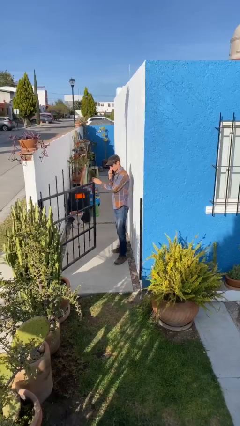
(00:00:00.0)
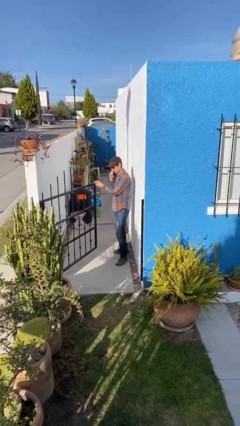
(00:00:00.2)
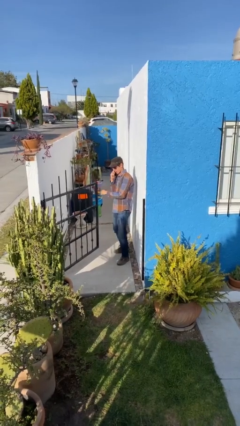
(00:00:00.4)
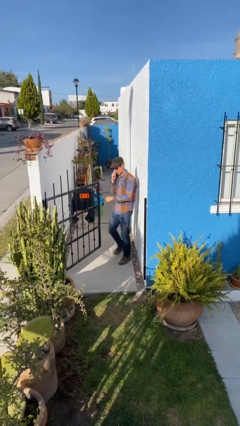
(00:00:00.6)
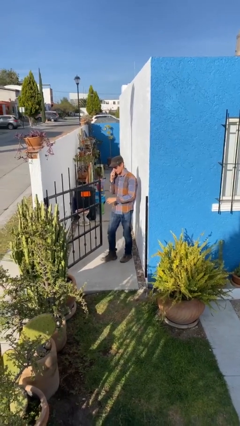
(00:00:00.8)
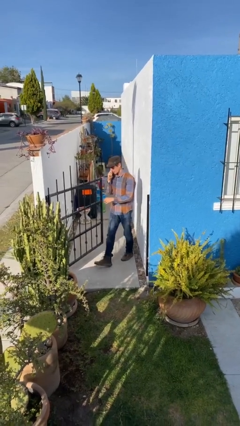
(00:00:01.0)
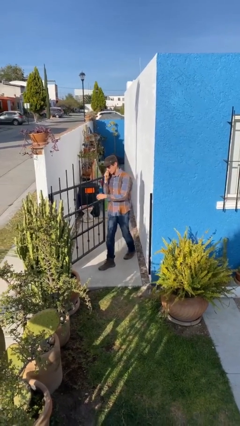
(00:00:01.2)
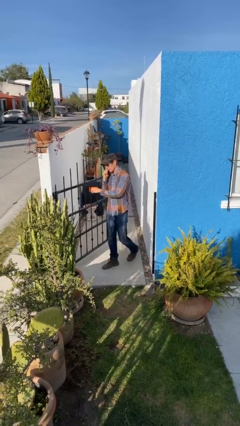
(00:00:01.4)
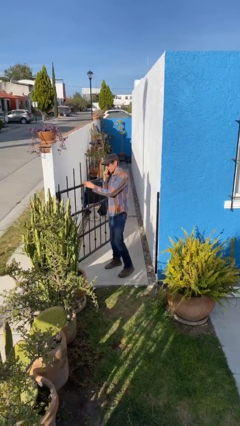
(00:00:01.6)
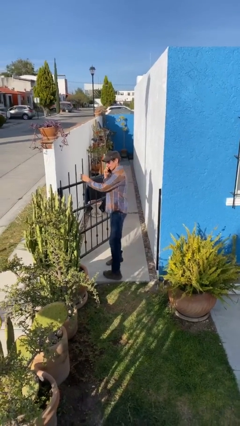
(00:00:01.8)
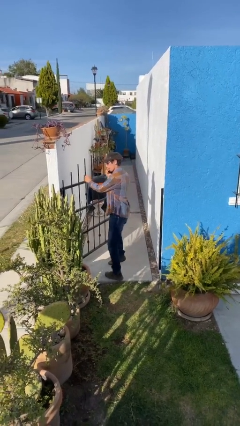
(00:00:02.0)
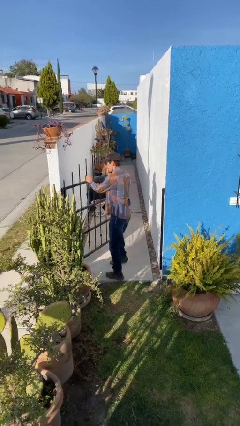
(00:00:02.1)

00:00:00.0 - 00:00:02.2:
person enters scene through structure

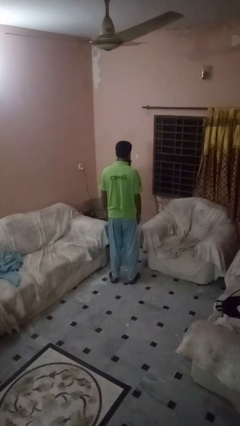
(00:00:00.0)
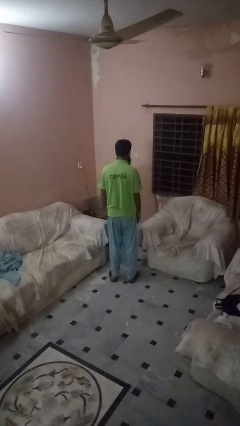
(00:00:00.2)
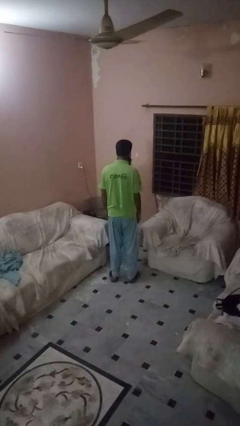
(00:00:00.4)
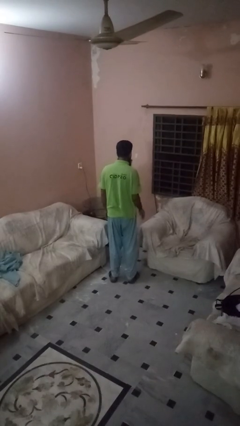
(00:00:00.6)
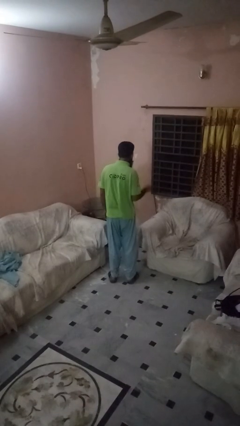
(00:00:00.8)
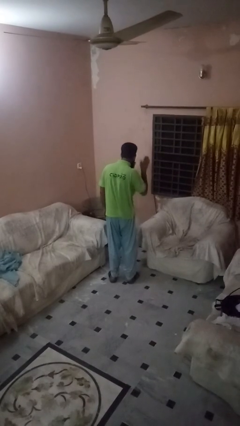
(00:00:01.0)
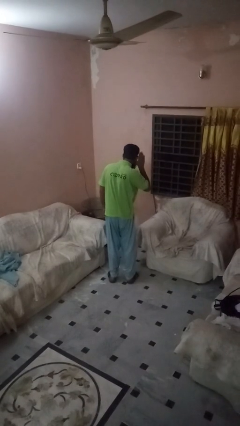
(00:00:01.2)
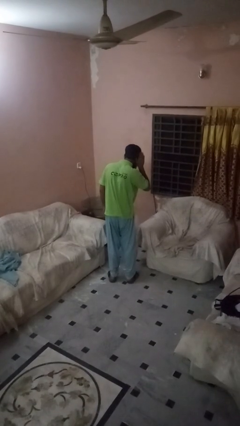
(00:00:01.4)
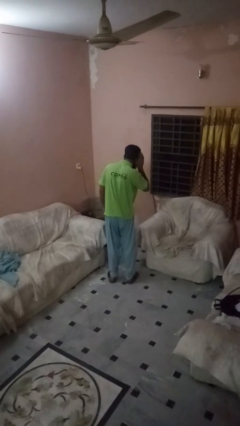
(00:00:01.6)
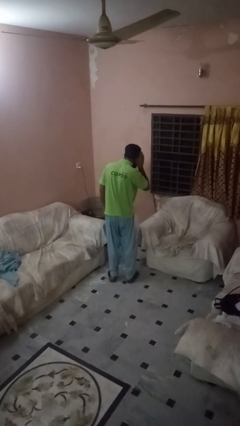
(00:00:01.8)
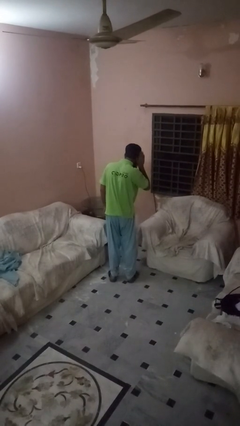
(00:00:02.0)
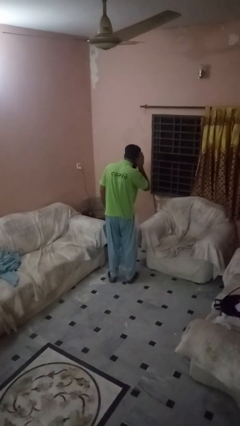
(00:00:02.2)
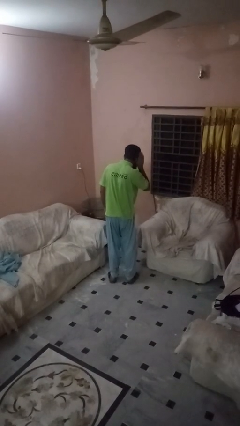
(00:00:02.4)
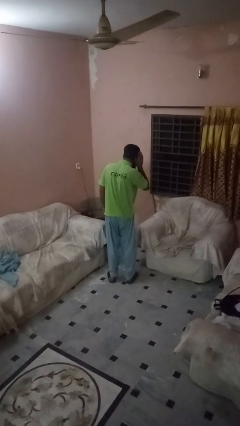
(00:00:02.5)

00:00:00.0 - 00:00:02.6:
person gestures listen closely

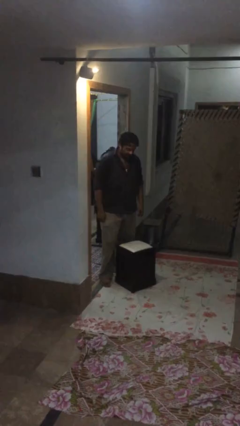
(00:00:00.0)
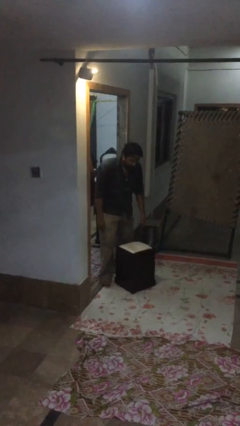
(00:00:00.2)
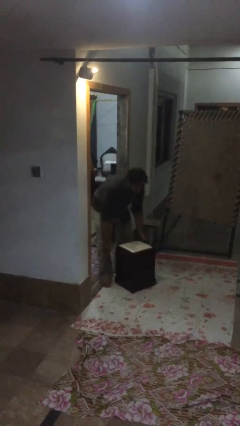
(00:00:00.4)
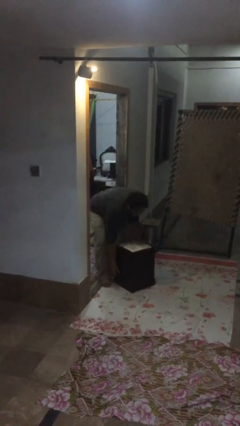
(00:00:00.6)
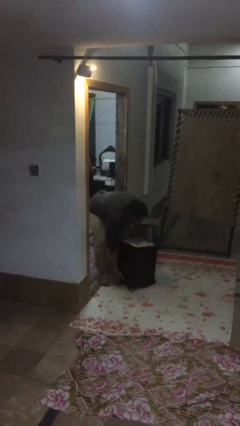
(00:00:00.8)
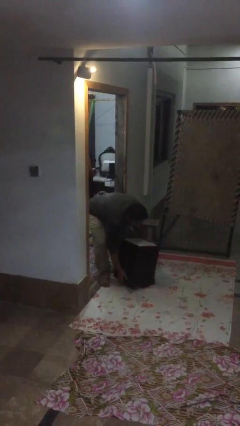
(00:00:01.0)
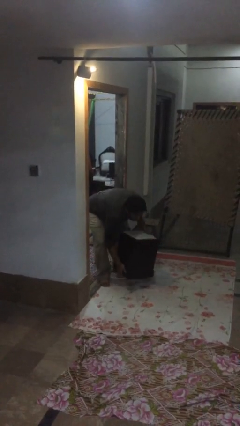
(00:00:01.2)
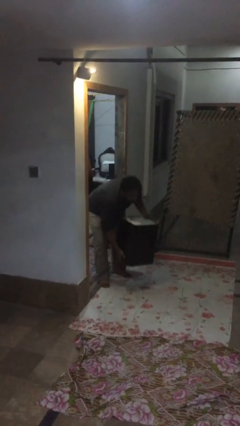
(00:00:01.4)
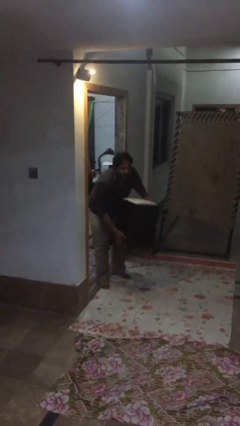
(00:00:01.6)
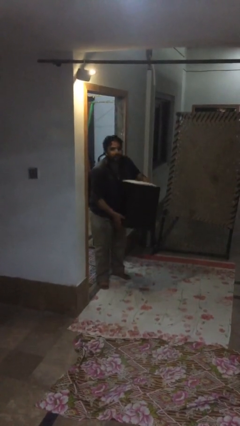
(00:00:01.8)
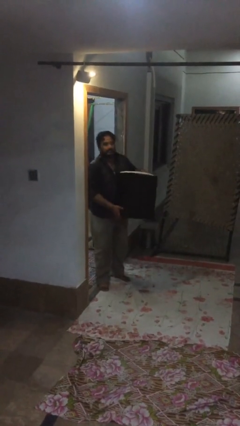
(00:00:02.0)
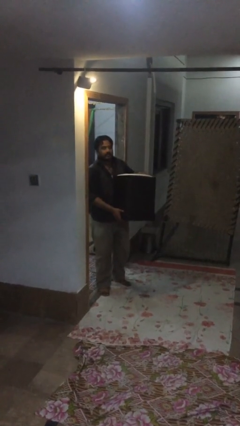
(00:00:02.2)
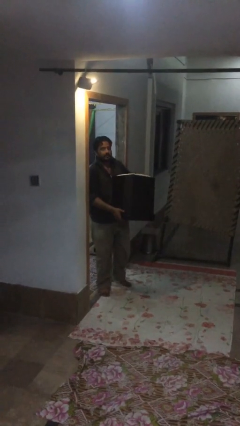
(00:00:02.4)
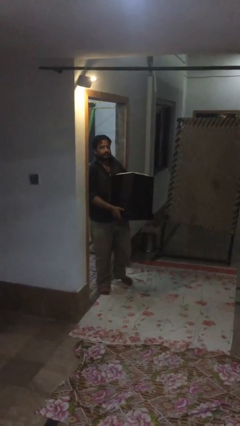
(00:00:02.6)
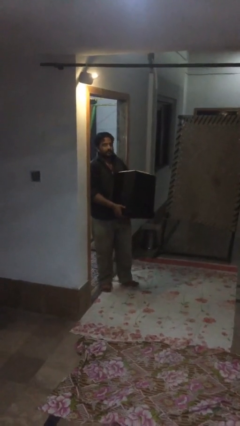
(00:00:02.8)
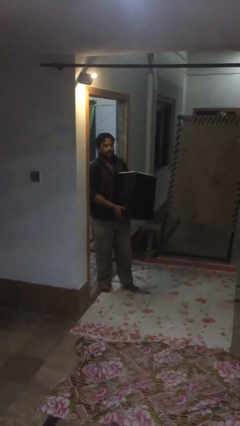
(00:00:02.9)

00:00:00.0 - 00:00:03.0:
person picks up object from floor

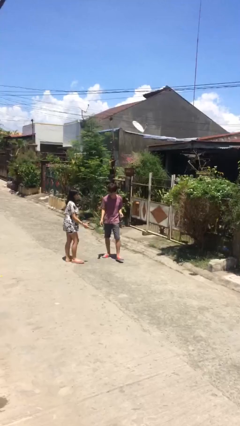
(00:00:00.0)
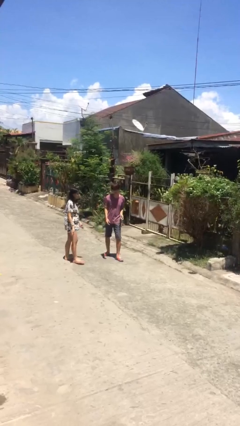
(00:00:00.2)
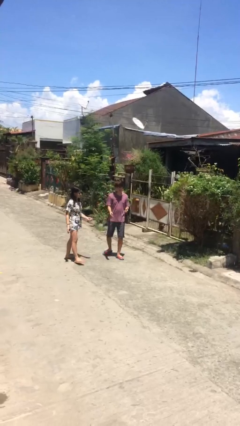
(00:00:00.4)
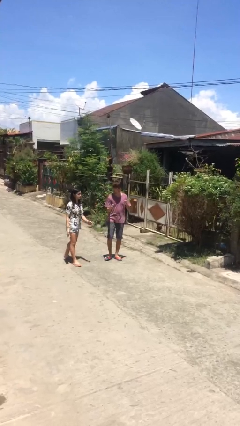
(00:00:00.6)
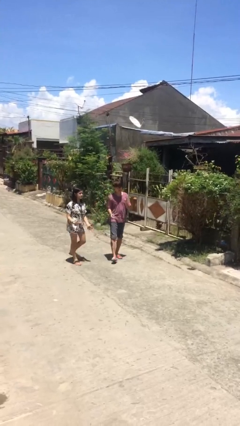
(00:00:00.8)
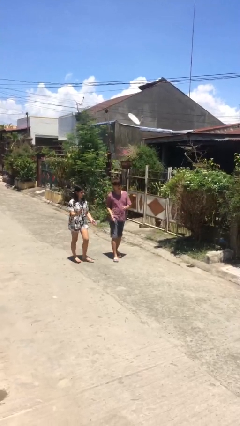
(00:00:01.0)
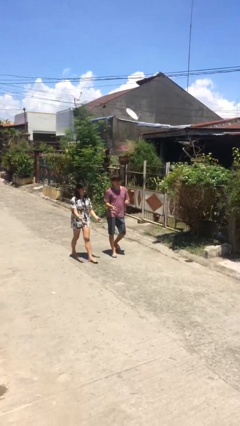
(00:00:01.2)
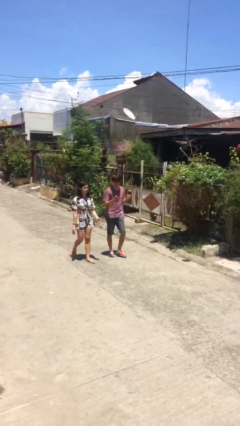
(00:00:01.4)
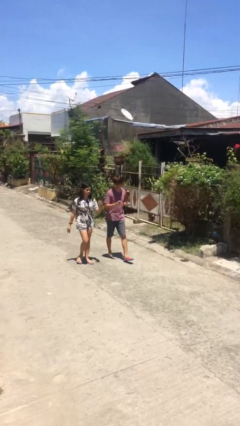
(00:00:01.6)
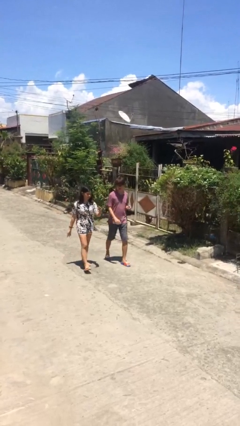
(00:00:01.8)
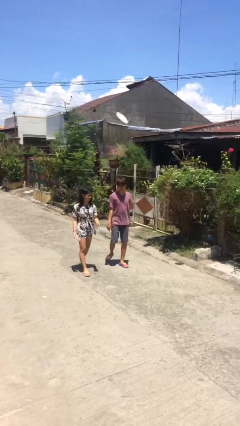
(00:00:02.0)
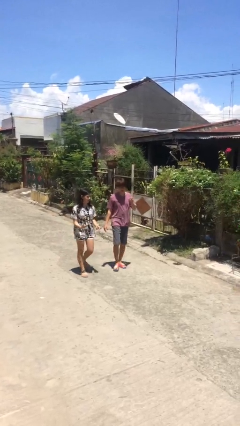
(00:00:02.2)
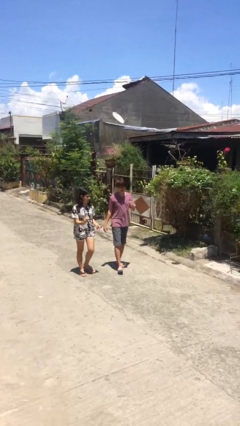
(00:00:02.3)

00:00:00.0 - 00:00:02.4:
person talks to person

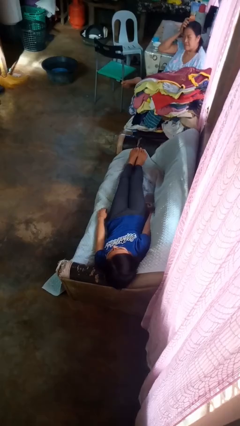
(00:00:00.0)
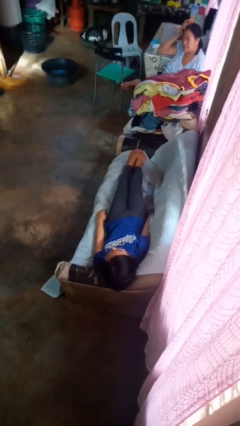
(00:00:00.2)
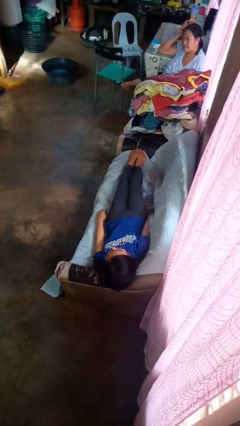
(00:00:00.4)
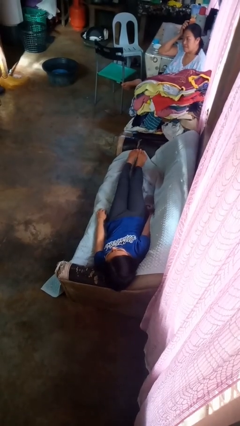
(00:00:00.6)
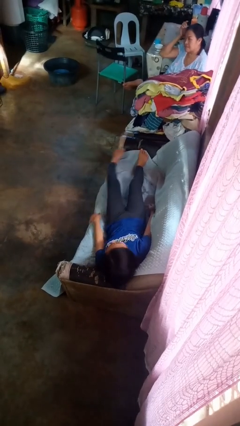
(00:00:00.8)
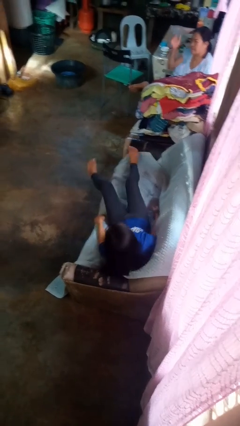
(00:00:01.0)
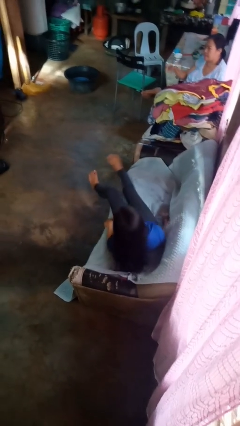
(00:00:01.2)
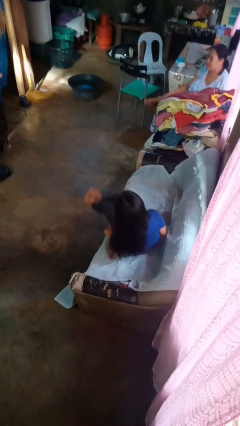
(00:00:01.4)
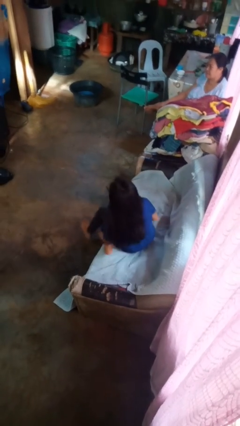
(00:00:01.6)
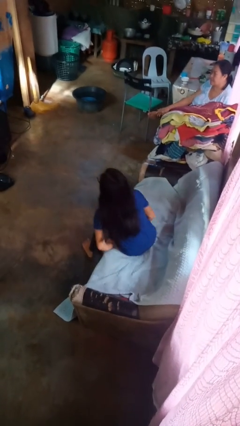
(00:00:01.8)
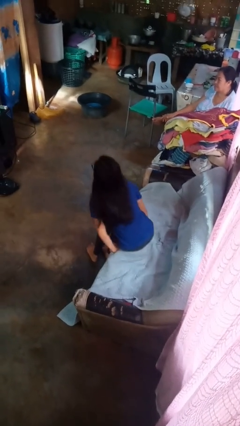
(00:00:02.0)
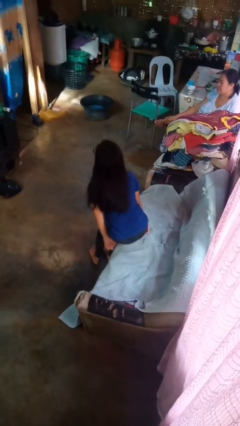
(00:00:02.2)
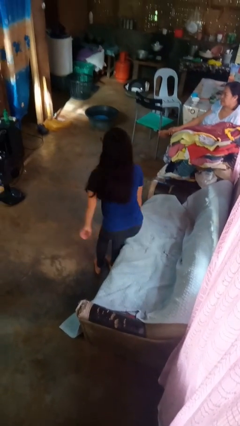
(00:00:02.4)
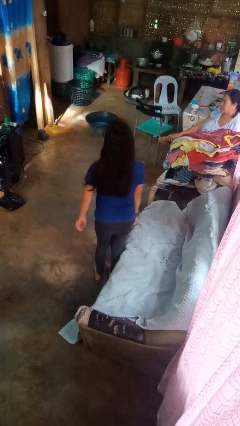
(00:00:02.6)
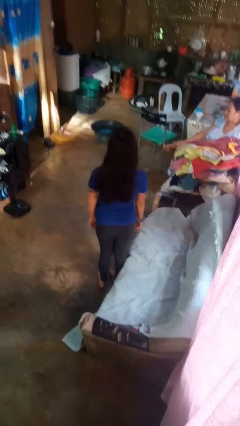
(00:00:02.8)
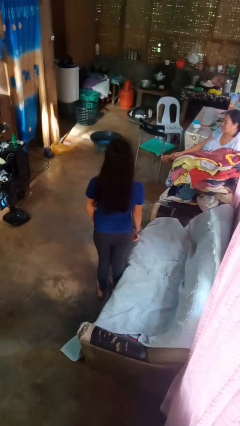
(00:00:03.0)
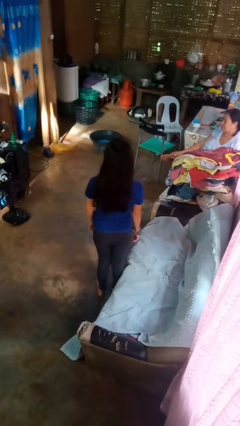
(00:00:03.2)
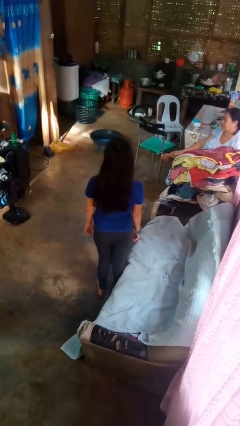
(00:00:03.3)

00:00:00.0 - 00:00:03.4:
person stands up

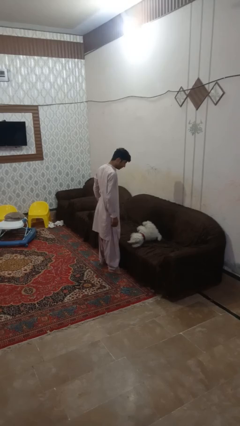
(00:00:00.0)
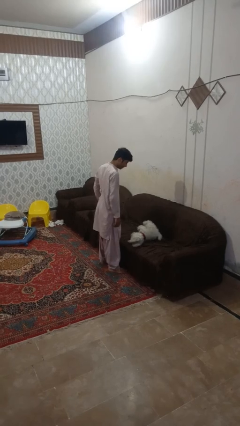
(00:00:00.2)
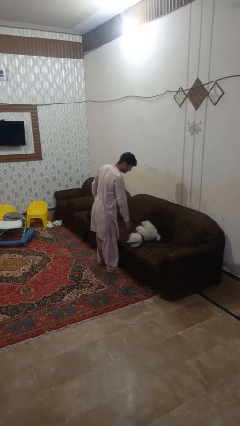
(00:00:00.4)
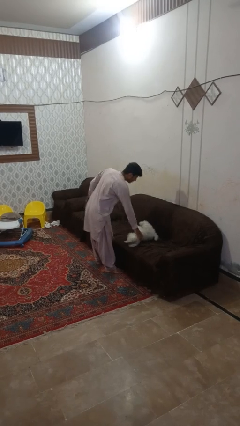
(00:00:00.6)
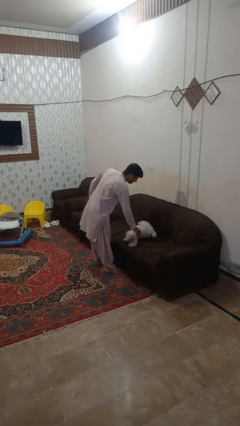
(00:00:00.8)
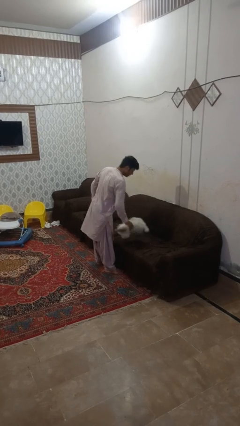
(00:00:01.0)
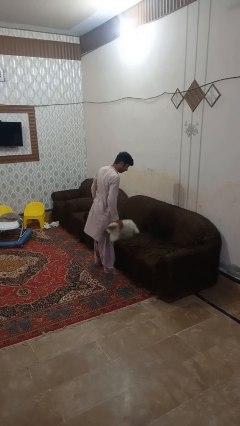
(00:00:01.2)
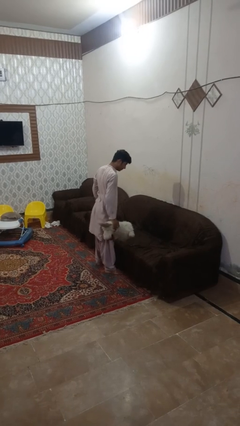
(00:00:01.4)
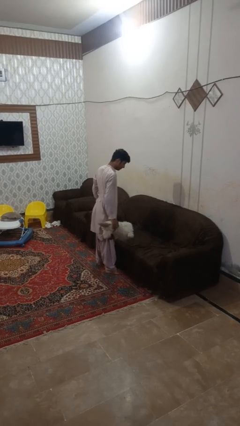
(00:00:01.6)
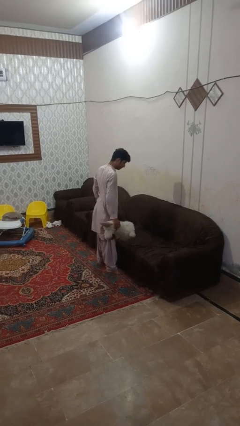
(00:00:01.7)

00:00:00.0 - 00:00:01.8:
person picks up object from couch

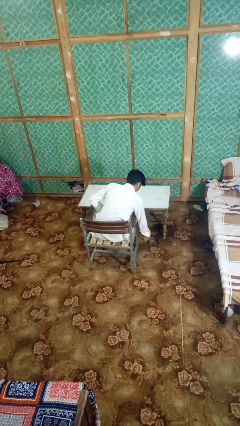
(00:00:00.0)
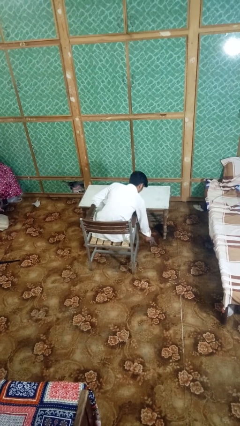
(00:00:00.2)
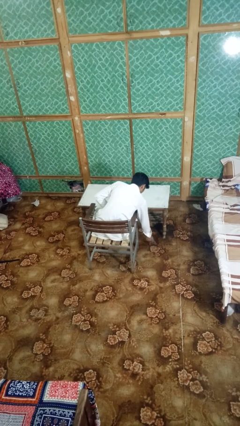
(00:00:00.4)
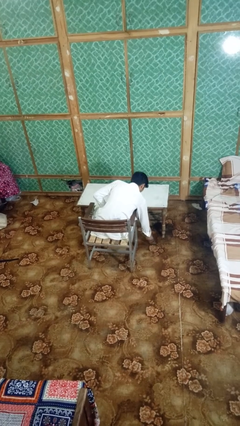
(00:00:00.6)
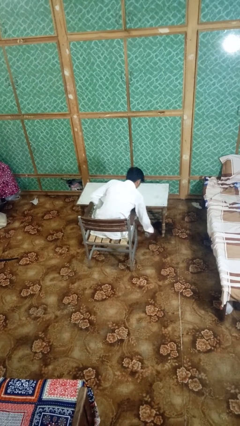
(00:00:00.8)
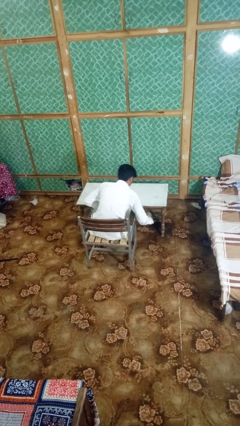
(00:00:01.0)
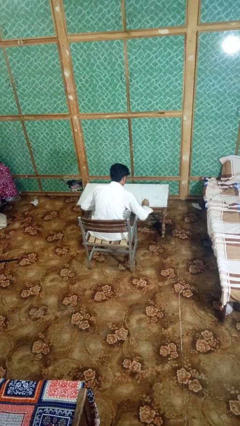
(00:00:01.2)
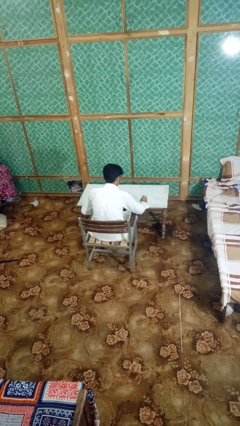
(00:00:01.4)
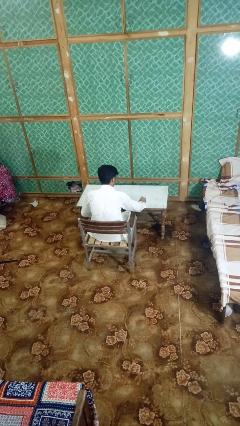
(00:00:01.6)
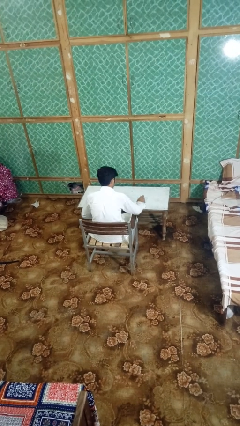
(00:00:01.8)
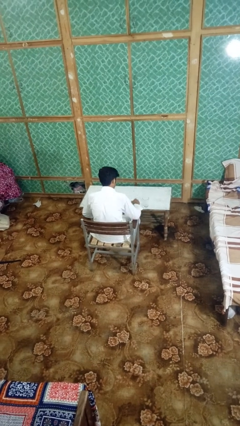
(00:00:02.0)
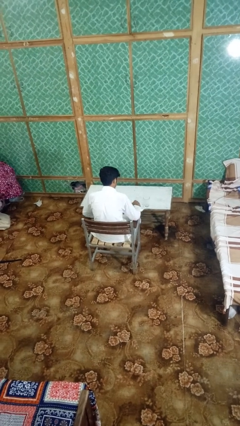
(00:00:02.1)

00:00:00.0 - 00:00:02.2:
person sets upright glass
